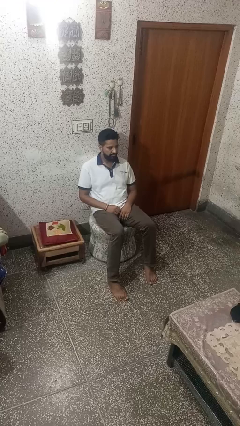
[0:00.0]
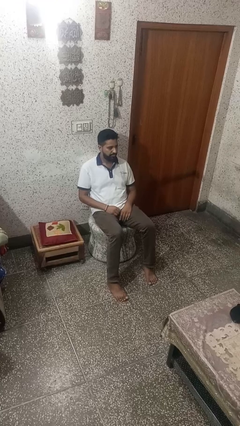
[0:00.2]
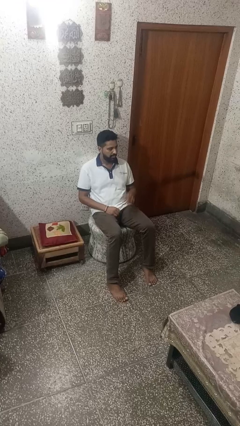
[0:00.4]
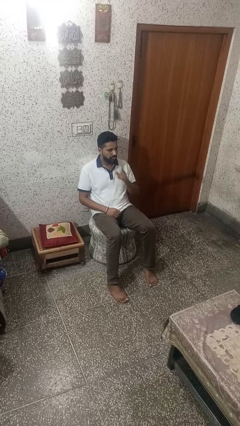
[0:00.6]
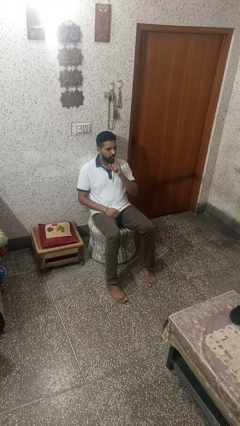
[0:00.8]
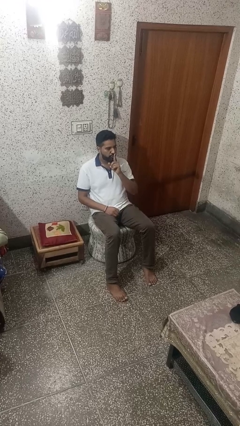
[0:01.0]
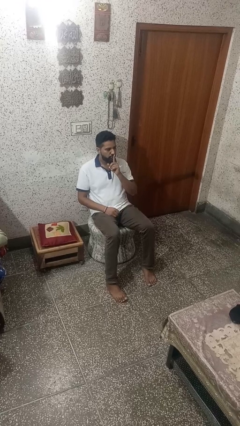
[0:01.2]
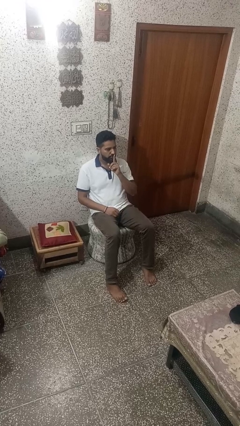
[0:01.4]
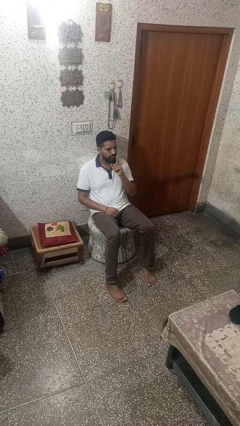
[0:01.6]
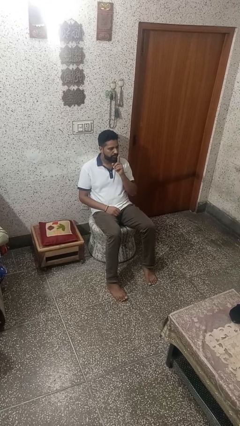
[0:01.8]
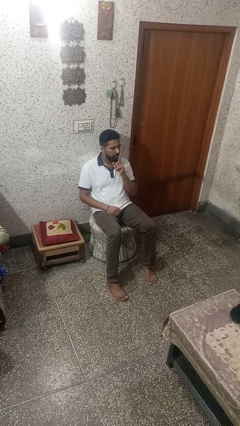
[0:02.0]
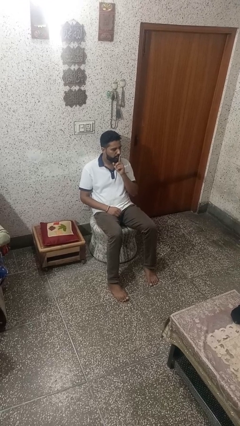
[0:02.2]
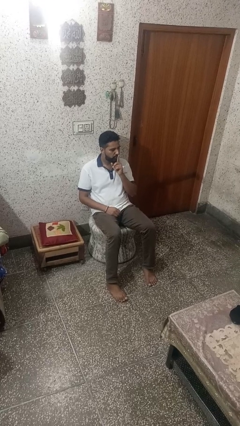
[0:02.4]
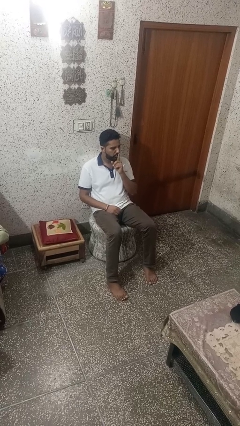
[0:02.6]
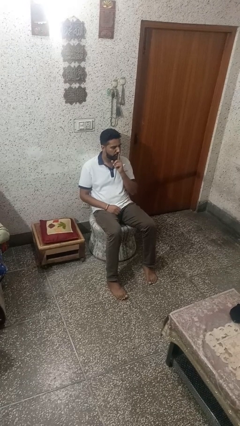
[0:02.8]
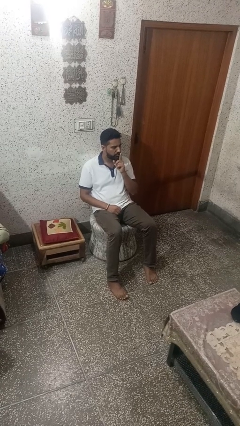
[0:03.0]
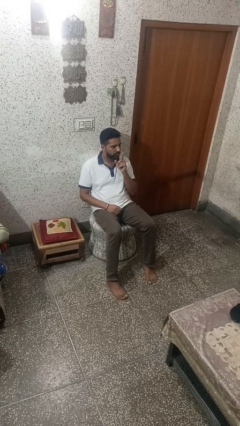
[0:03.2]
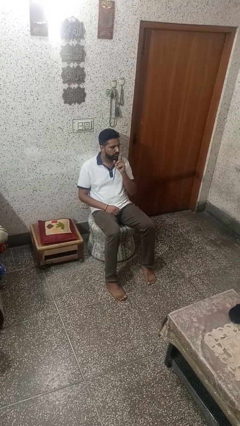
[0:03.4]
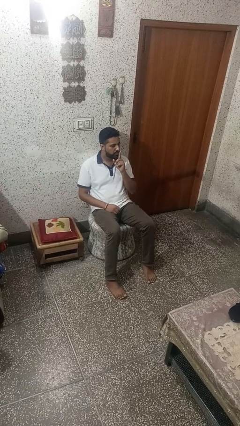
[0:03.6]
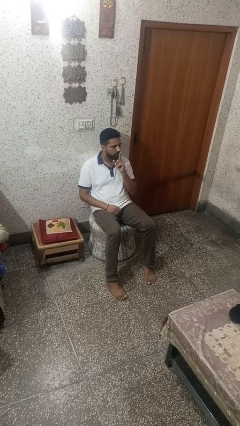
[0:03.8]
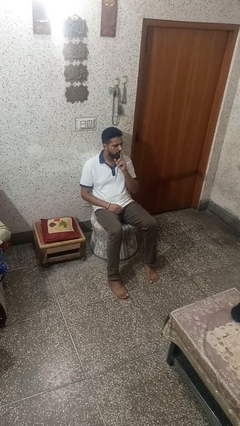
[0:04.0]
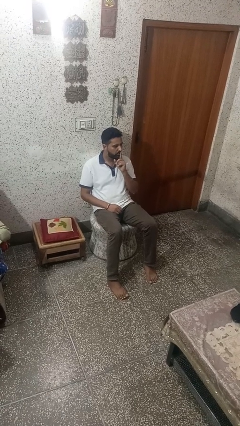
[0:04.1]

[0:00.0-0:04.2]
person gestures be quiet

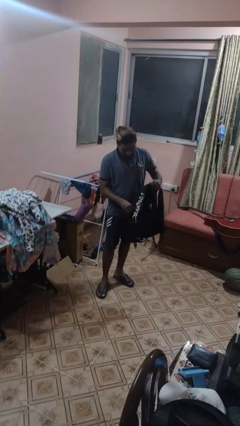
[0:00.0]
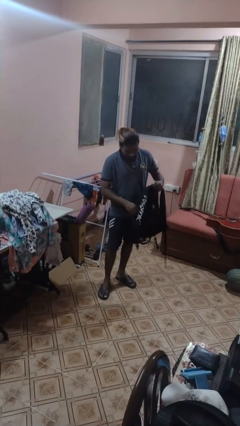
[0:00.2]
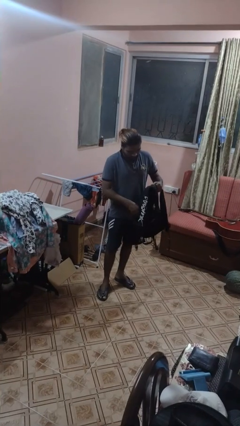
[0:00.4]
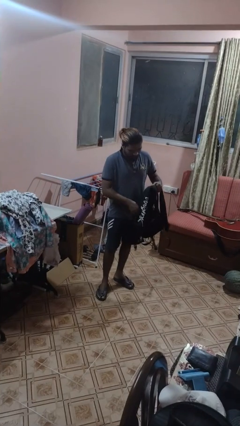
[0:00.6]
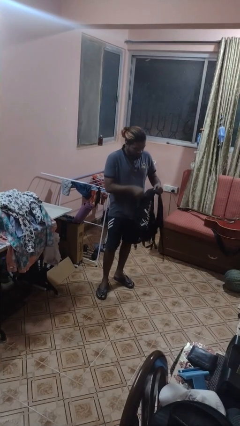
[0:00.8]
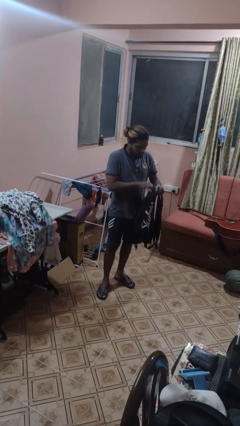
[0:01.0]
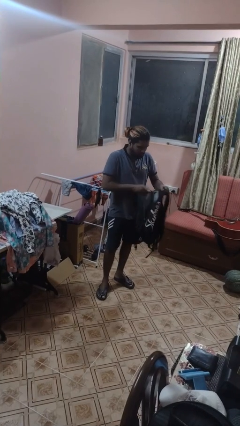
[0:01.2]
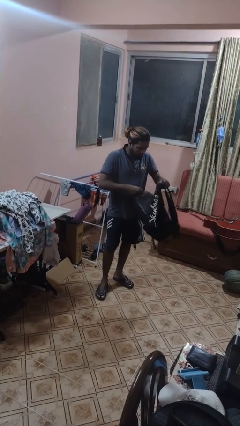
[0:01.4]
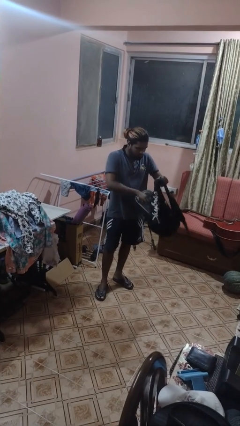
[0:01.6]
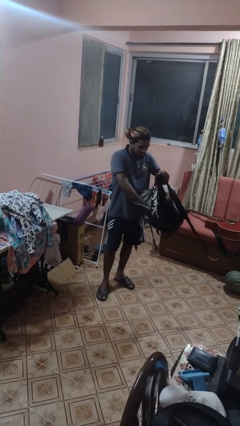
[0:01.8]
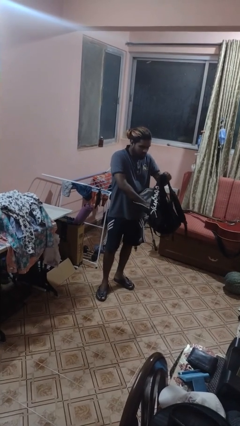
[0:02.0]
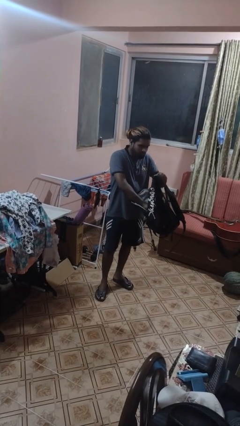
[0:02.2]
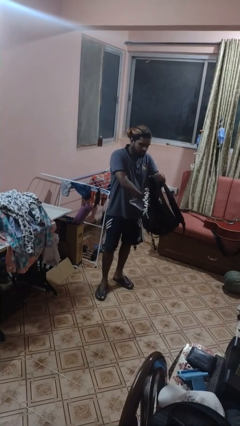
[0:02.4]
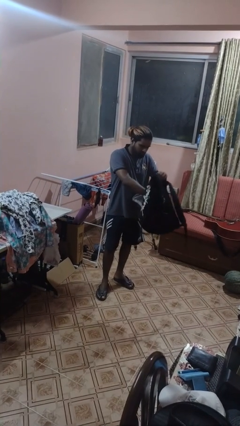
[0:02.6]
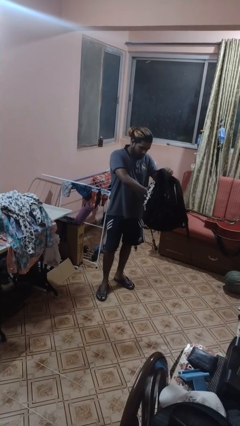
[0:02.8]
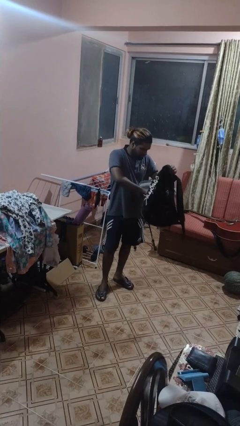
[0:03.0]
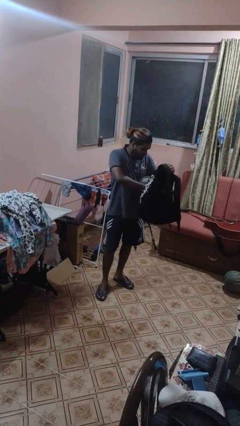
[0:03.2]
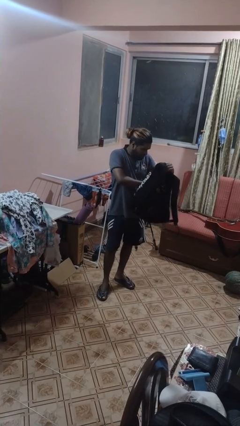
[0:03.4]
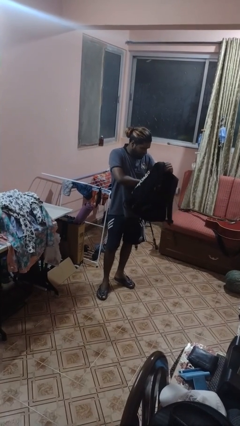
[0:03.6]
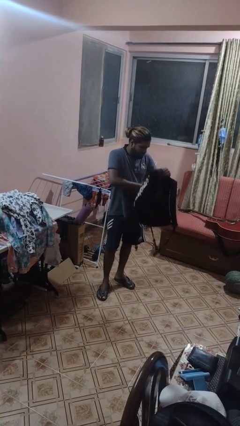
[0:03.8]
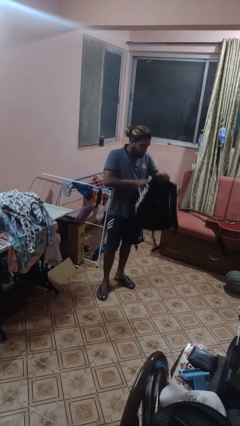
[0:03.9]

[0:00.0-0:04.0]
person searches in backpack

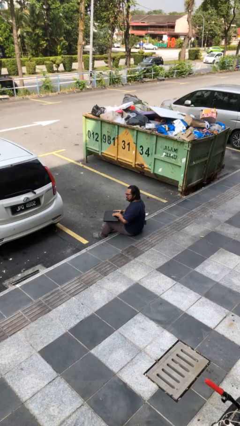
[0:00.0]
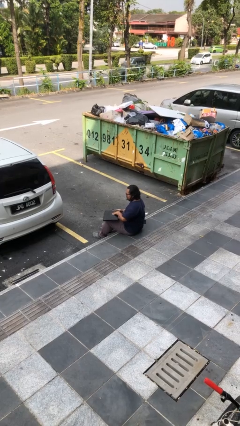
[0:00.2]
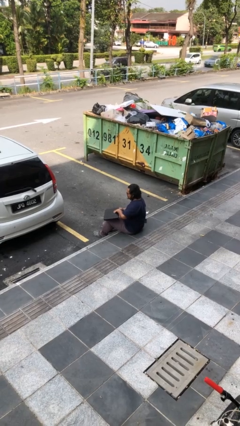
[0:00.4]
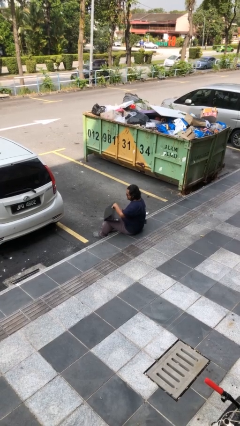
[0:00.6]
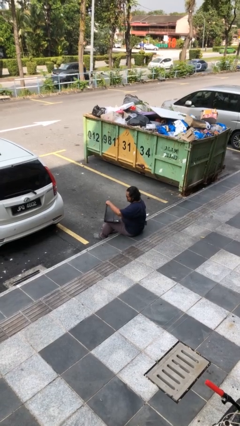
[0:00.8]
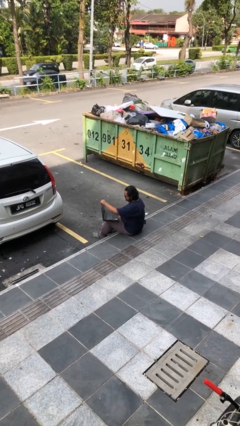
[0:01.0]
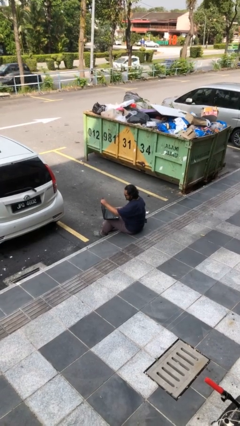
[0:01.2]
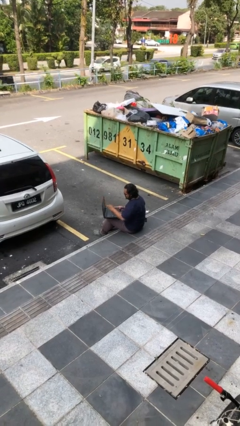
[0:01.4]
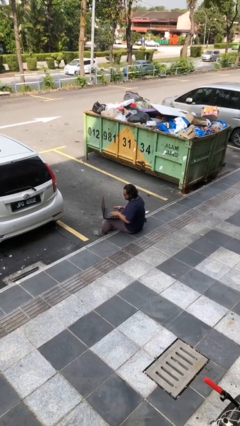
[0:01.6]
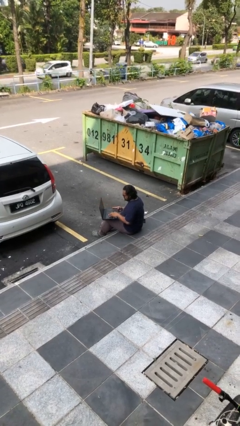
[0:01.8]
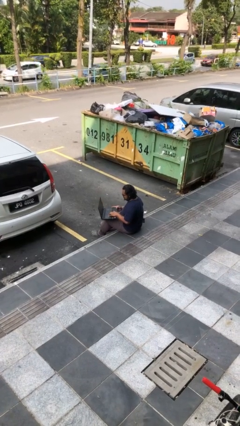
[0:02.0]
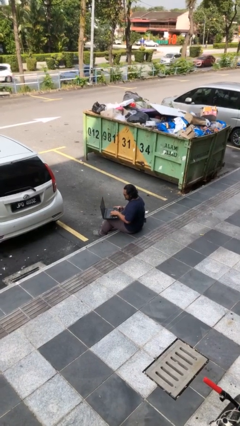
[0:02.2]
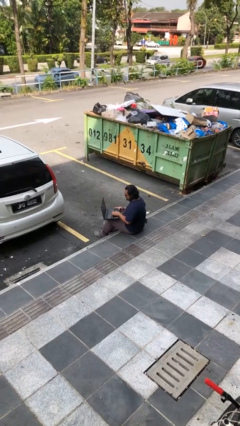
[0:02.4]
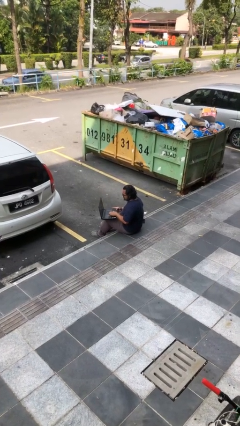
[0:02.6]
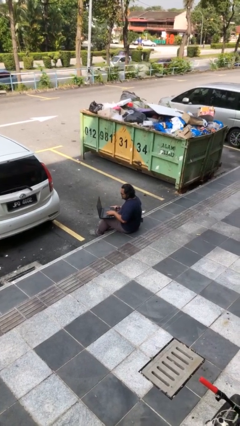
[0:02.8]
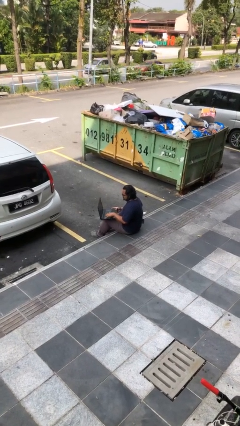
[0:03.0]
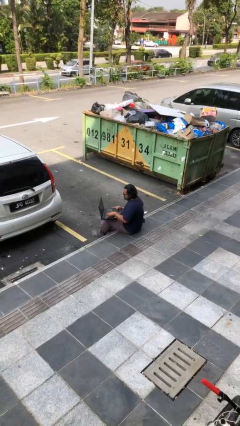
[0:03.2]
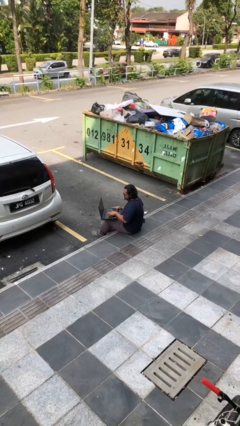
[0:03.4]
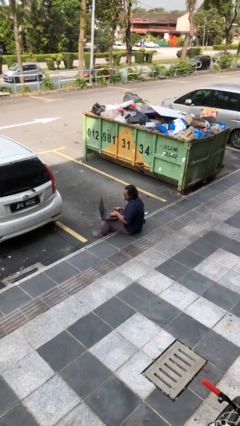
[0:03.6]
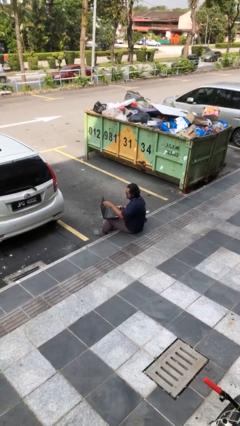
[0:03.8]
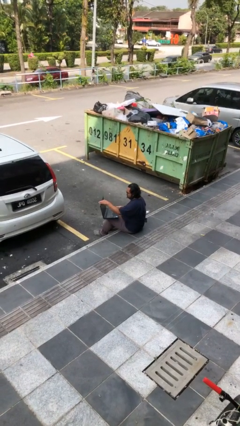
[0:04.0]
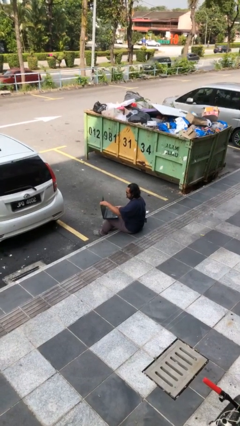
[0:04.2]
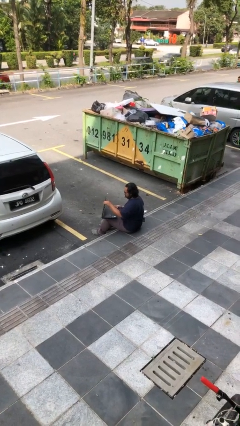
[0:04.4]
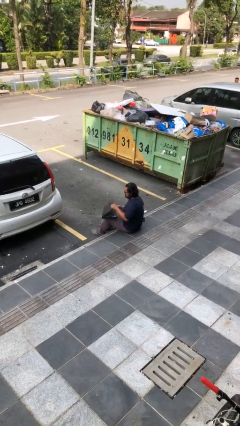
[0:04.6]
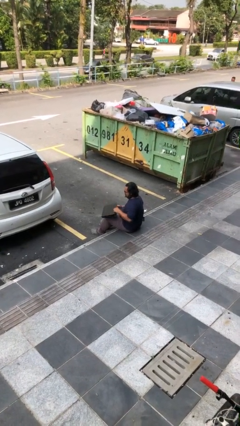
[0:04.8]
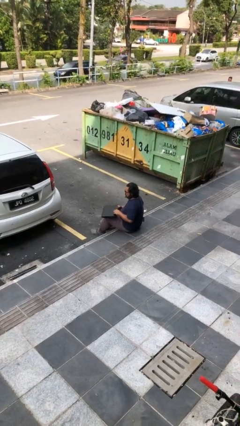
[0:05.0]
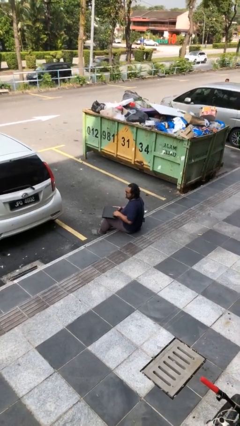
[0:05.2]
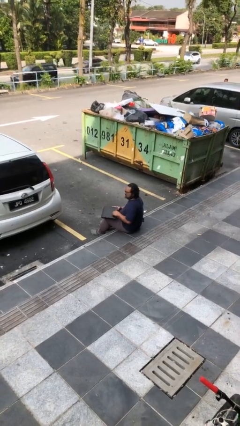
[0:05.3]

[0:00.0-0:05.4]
person interacts with laptop

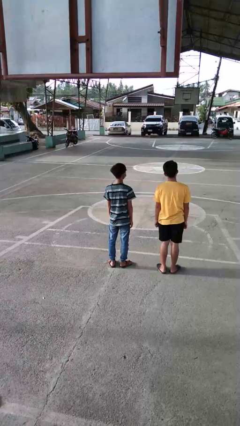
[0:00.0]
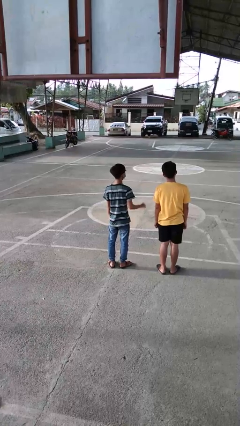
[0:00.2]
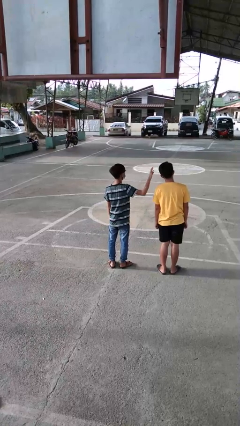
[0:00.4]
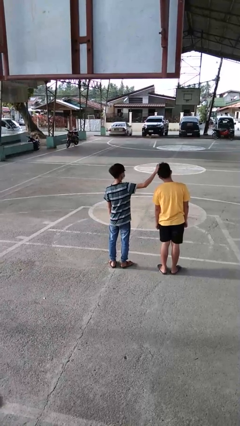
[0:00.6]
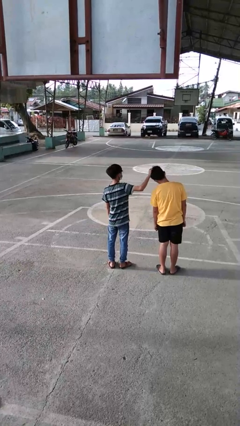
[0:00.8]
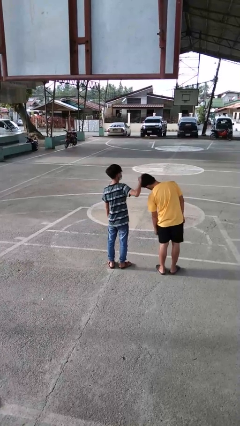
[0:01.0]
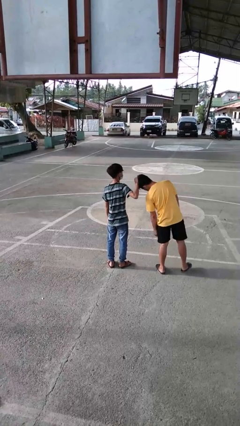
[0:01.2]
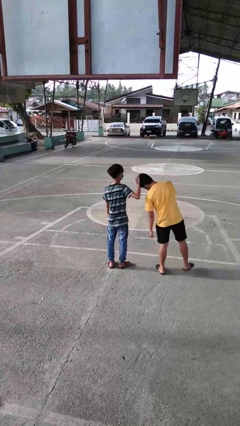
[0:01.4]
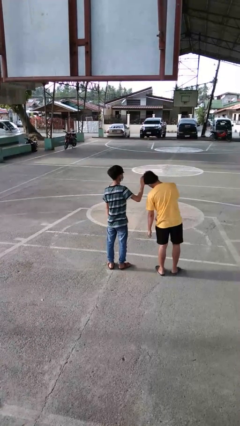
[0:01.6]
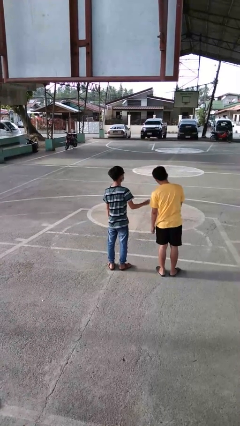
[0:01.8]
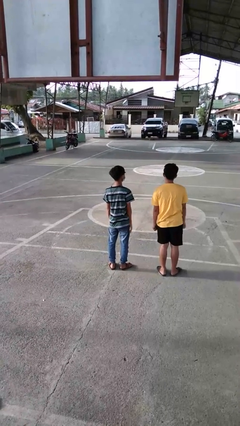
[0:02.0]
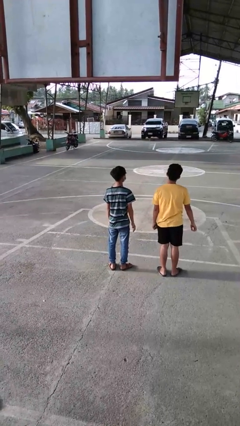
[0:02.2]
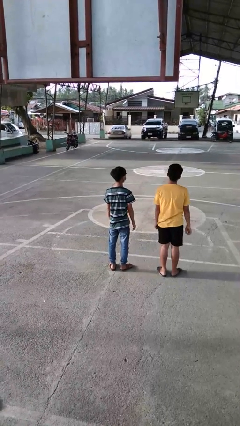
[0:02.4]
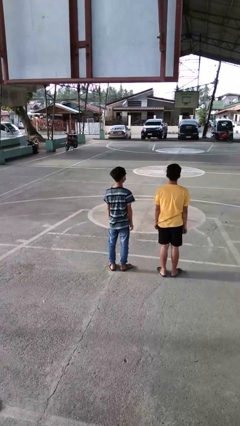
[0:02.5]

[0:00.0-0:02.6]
person grabs person by hair

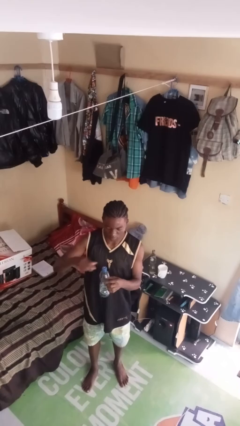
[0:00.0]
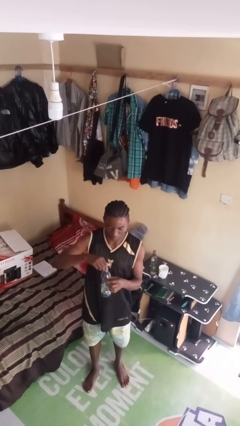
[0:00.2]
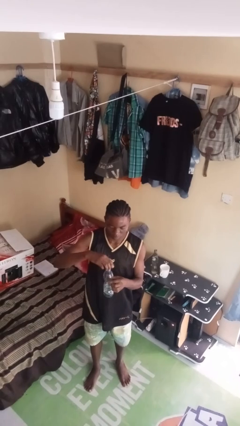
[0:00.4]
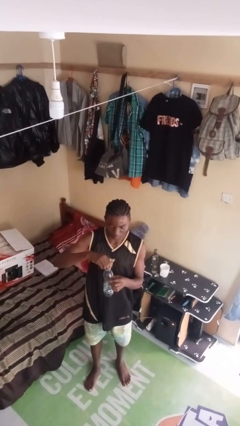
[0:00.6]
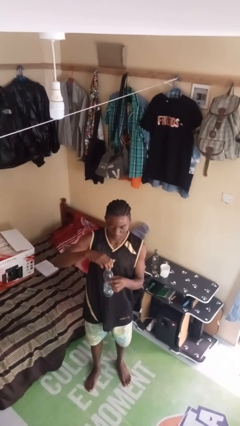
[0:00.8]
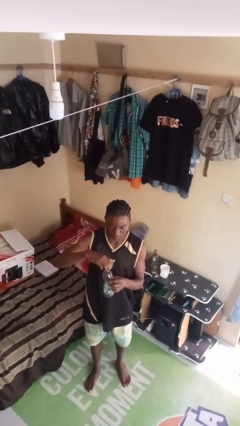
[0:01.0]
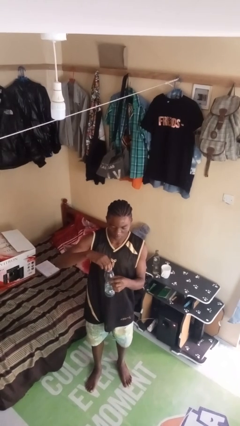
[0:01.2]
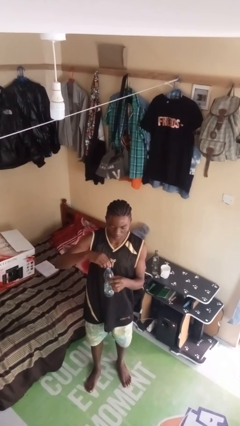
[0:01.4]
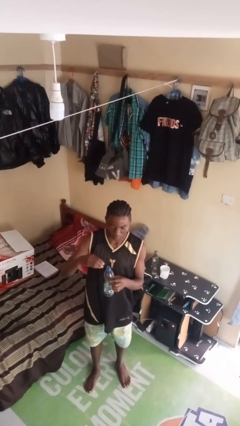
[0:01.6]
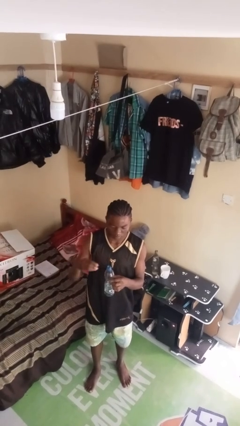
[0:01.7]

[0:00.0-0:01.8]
person unscrews lid from bottle
